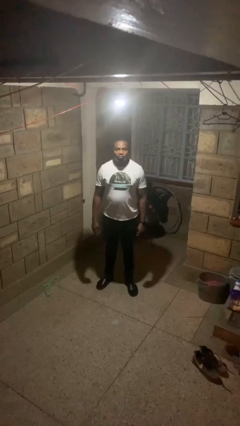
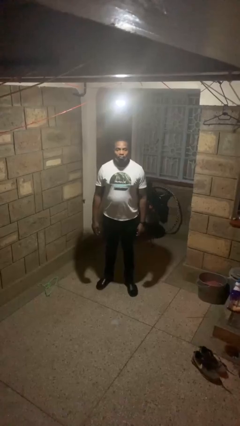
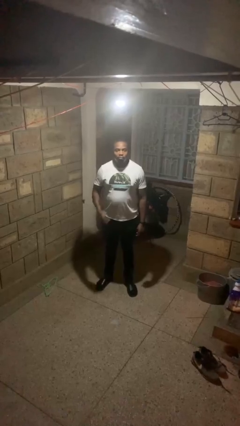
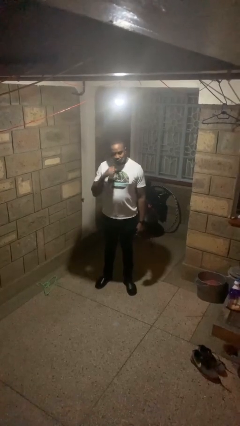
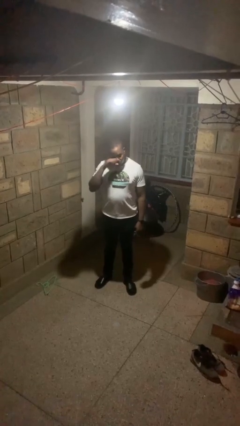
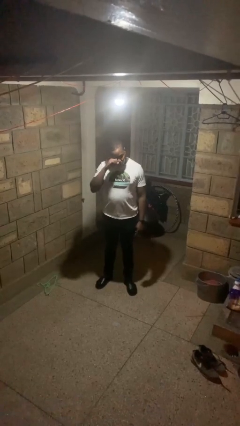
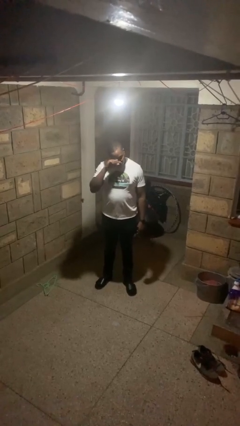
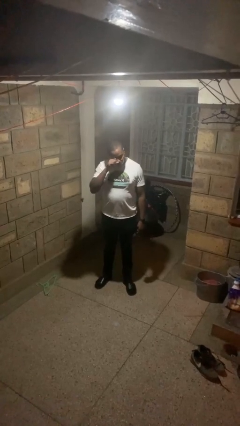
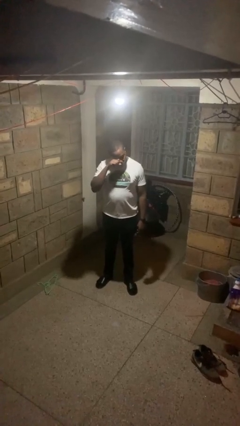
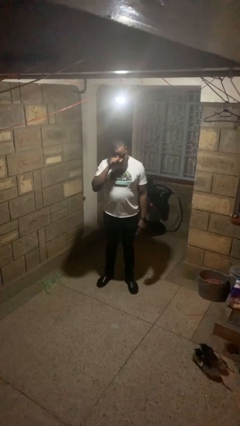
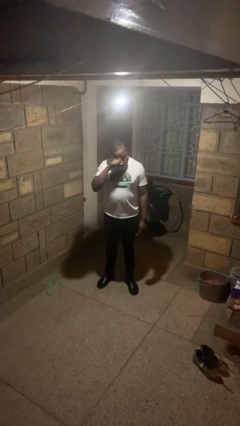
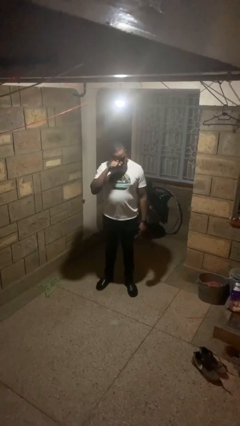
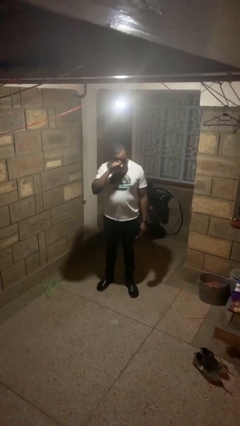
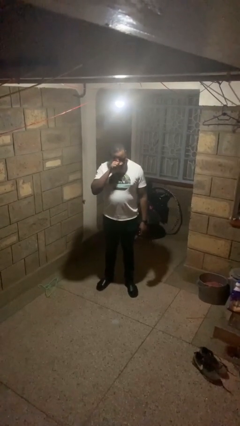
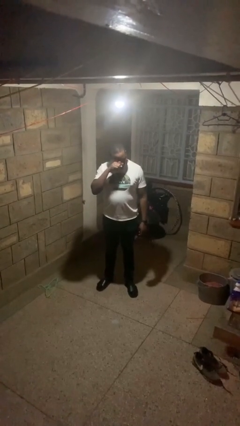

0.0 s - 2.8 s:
person rubs eyes

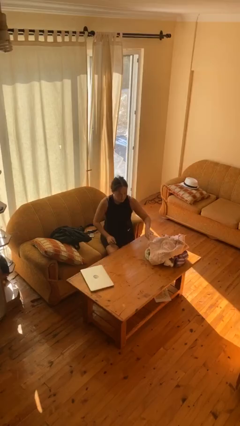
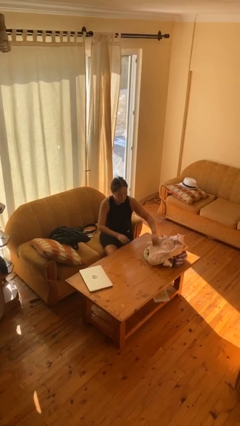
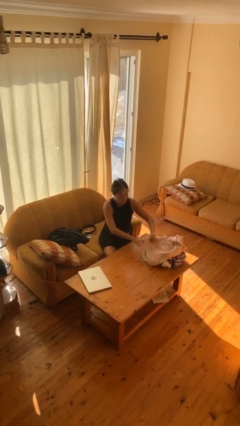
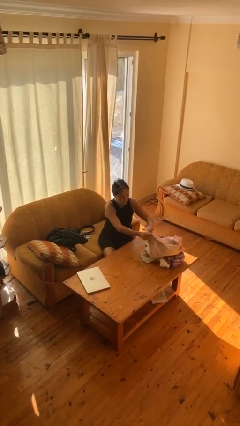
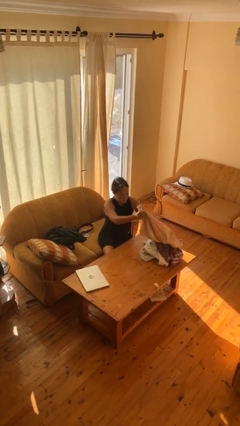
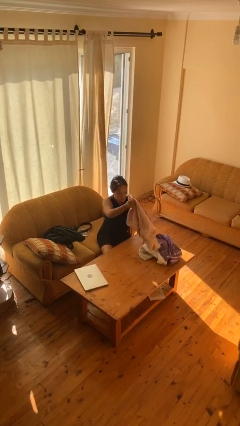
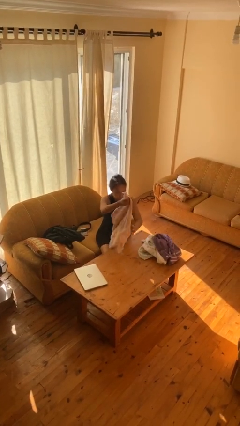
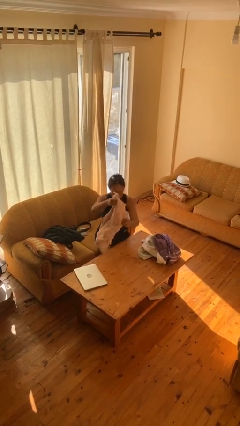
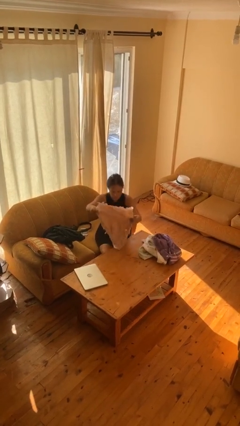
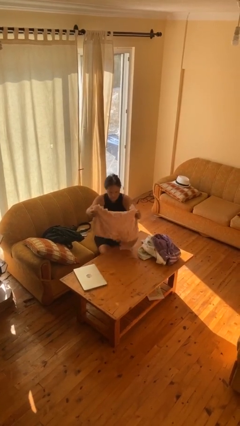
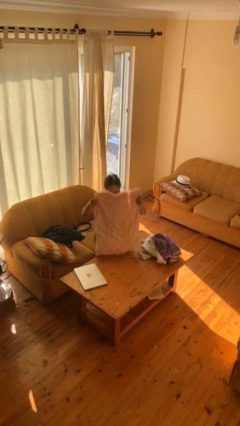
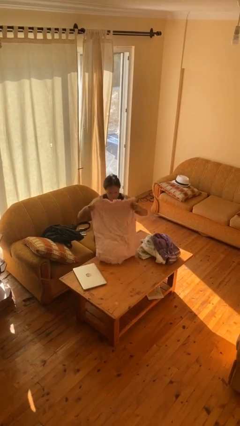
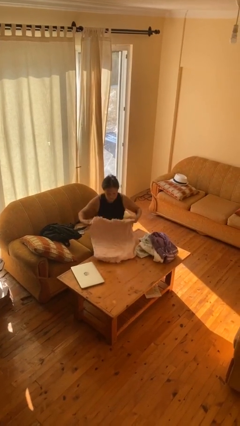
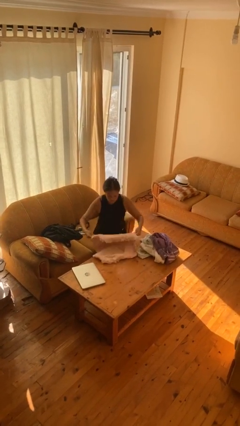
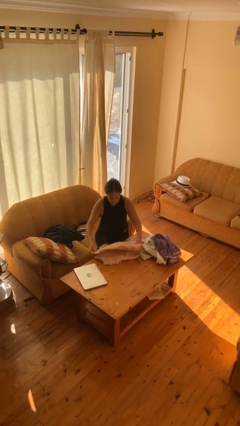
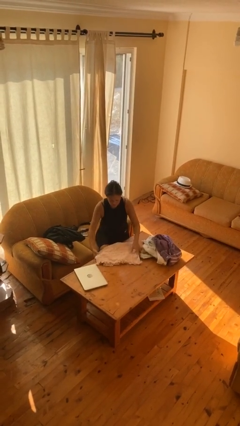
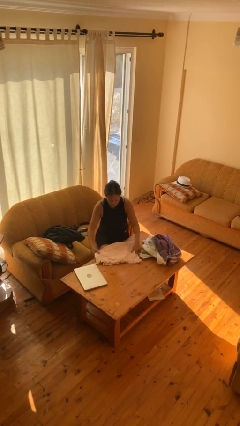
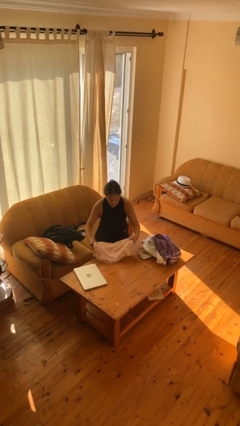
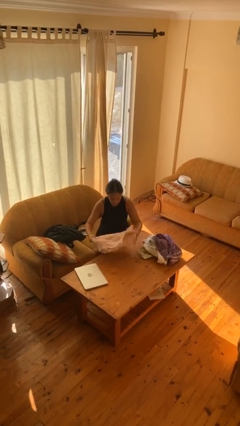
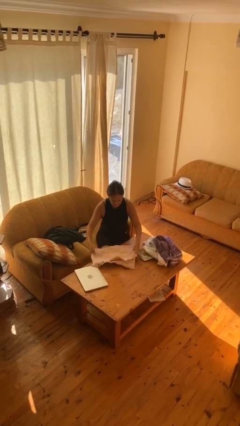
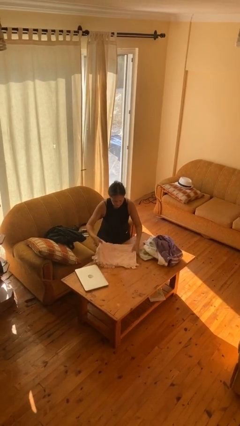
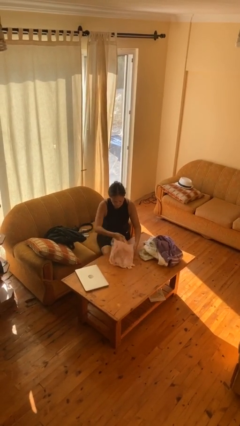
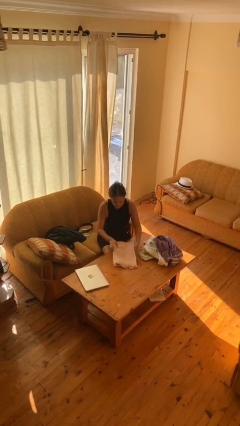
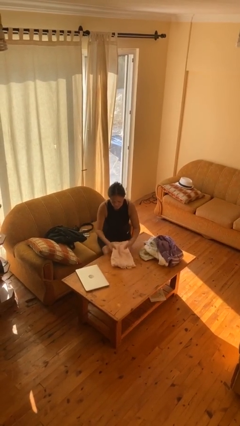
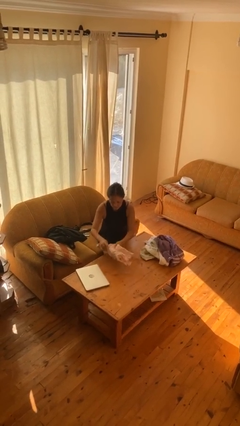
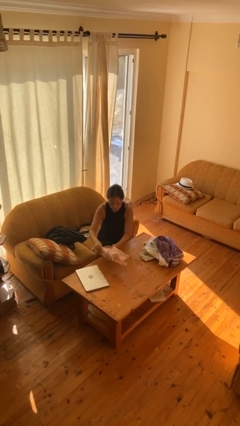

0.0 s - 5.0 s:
person folds towel

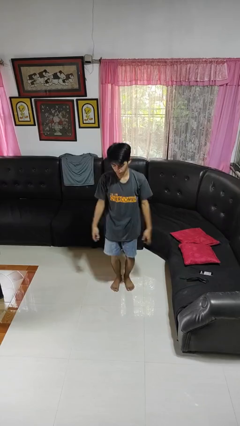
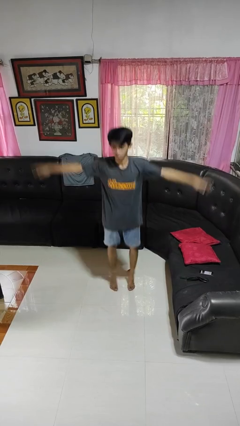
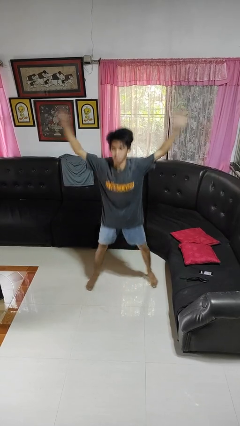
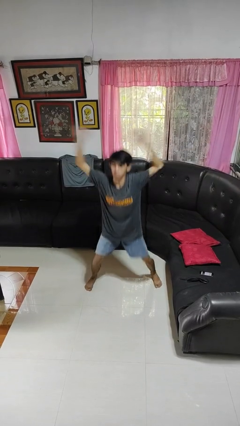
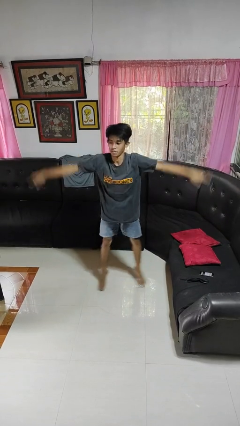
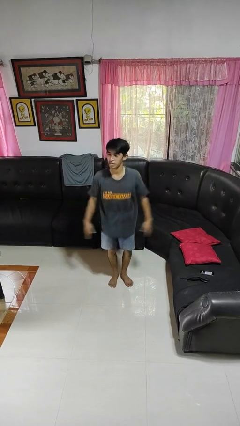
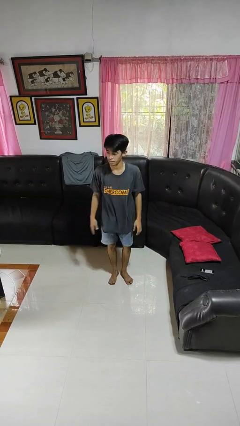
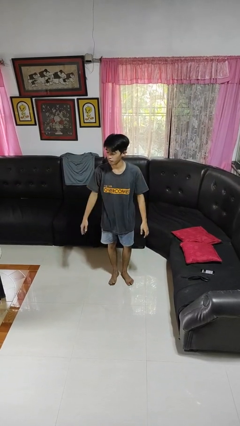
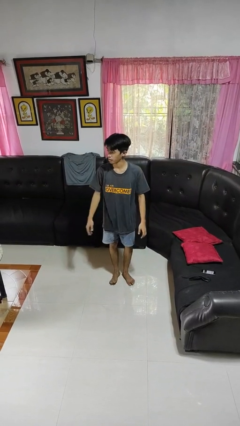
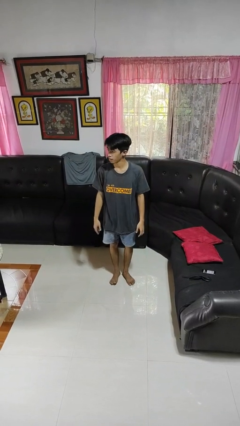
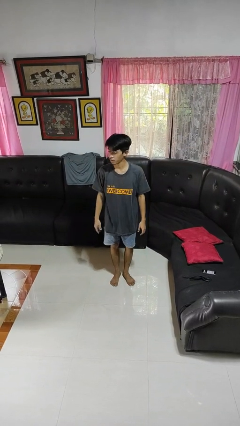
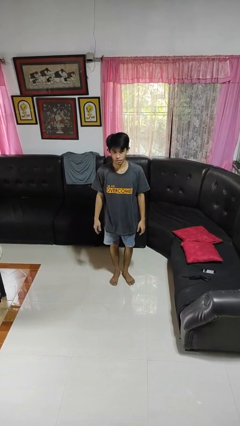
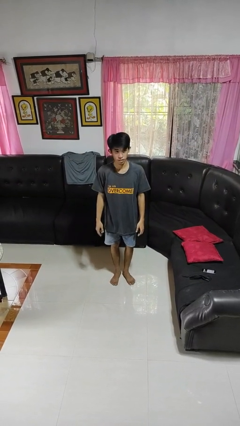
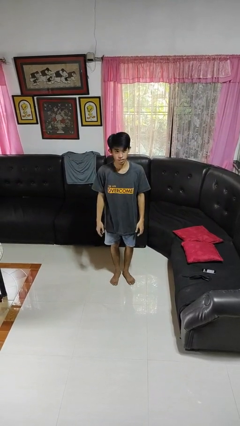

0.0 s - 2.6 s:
person exercises with jumping jacks

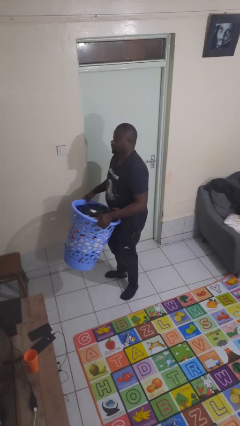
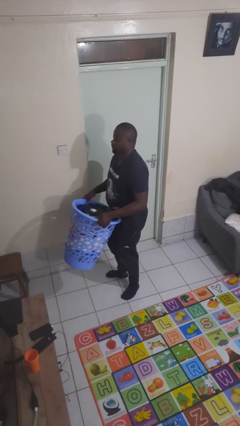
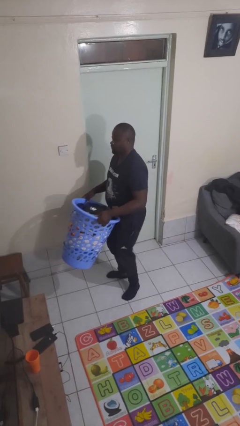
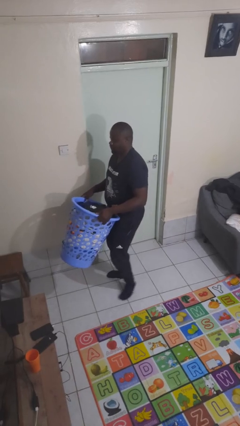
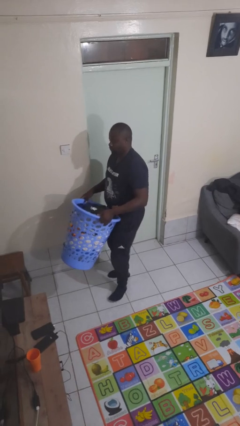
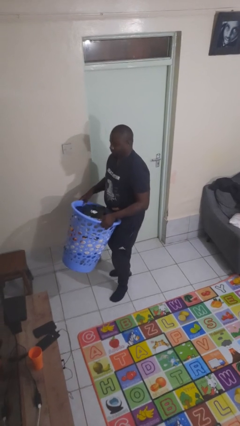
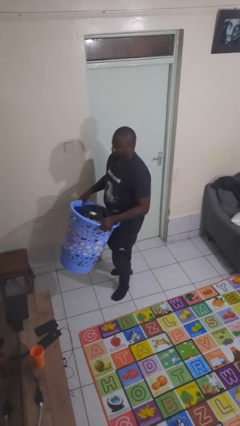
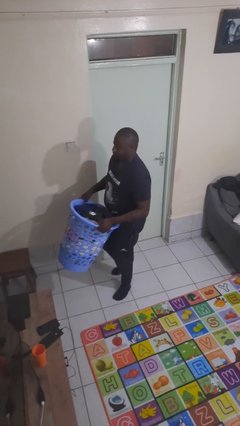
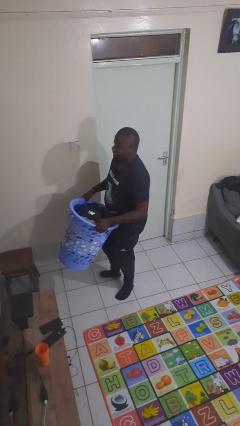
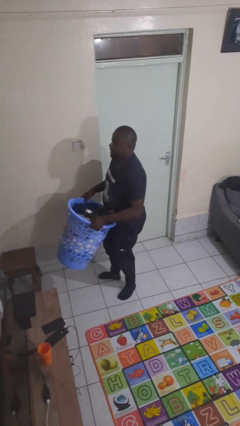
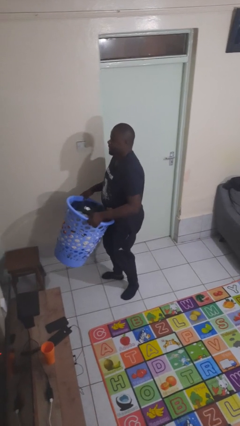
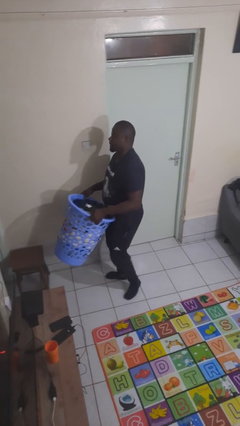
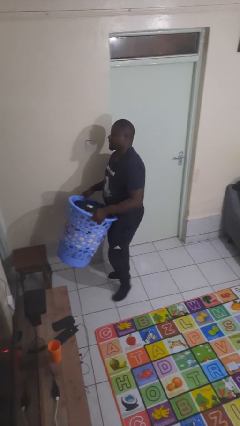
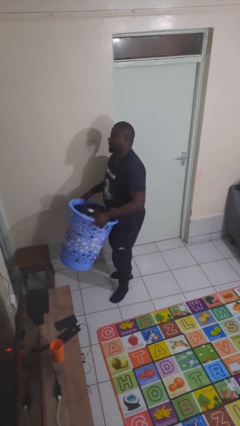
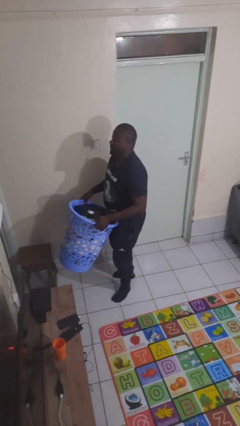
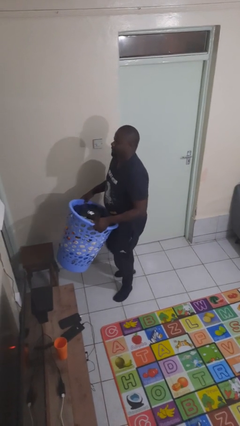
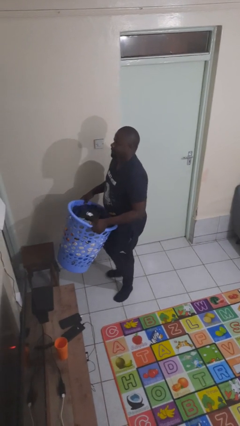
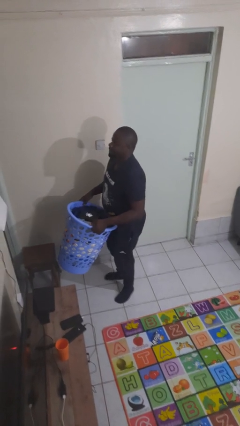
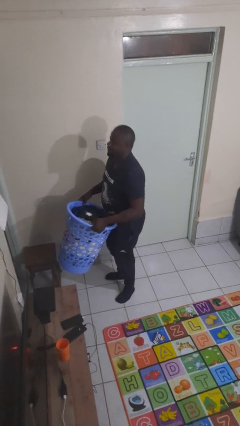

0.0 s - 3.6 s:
person carries laundry basket

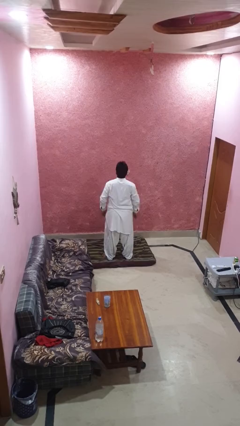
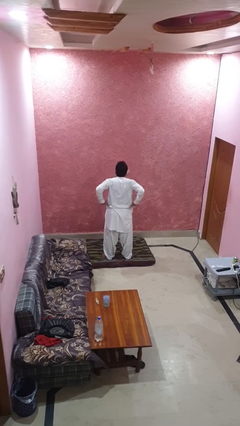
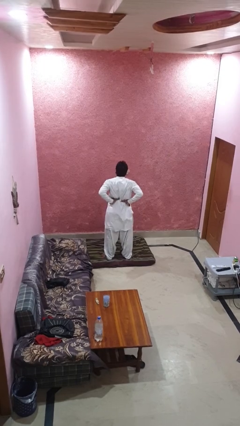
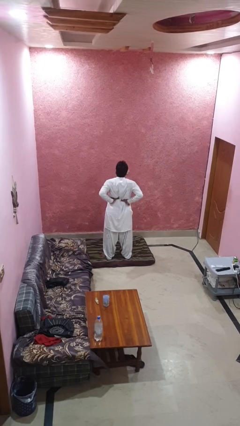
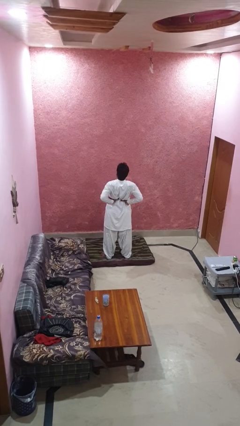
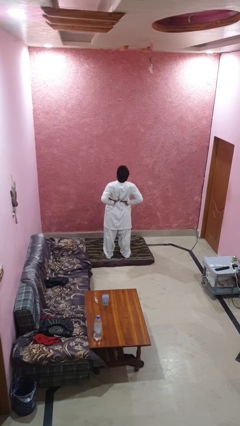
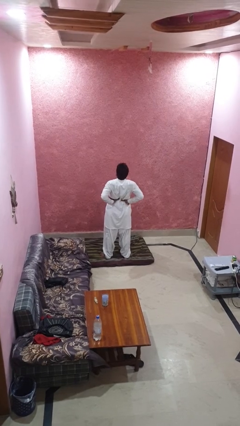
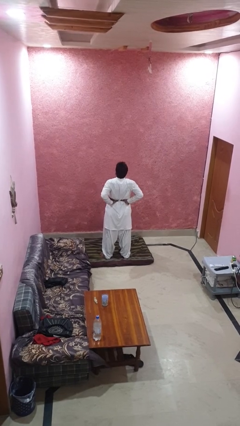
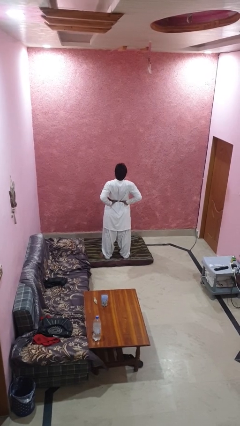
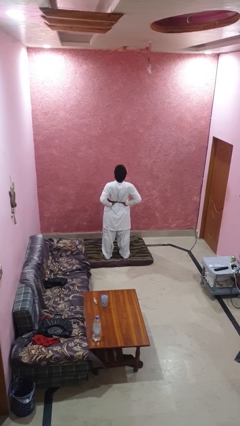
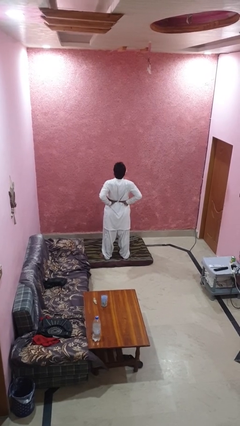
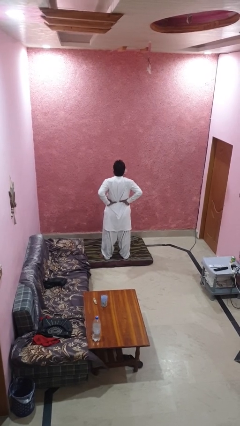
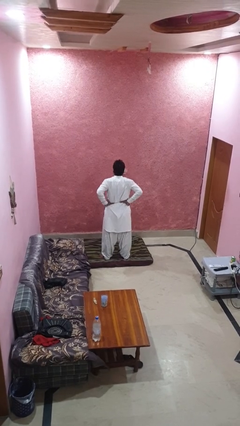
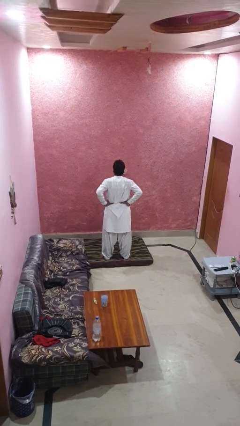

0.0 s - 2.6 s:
person stretches back

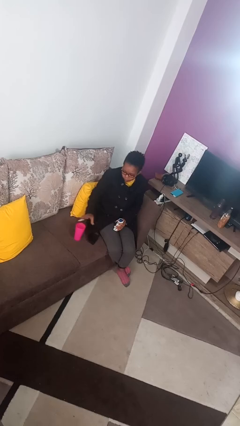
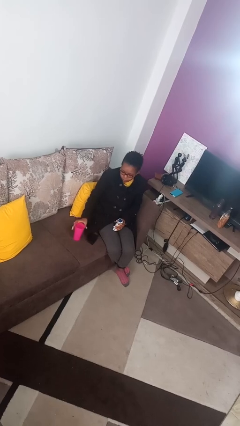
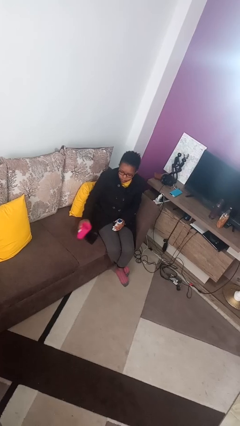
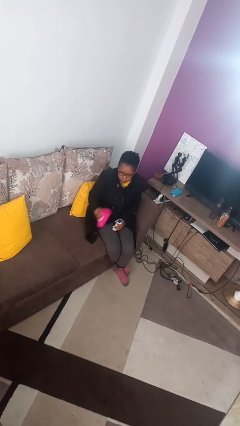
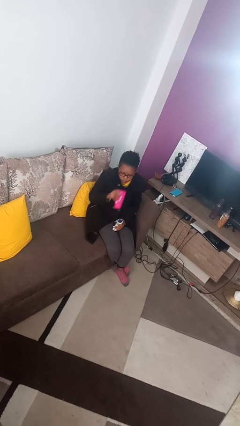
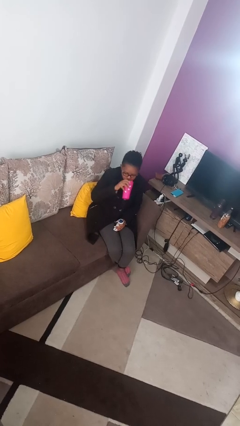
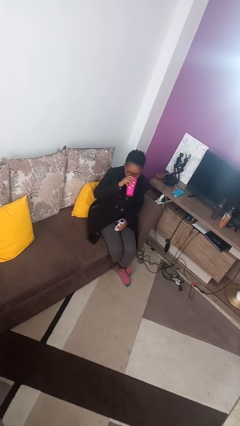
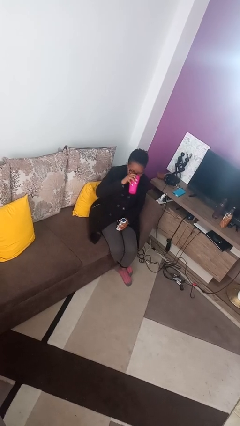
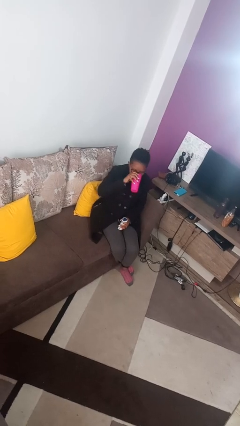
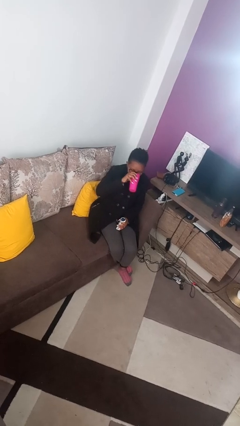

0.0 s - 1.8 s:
person drinks from cup
